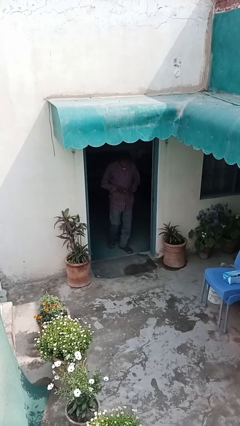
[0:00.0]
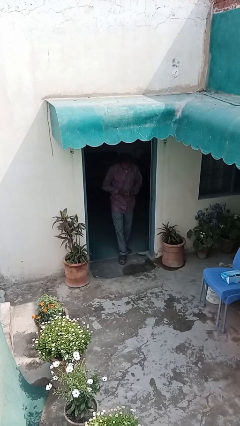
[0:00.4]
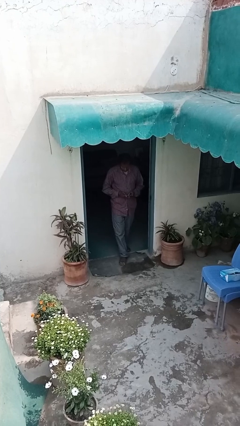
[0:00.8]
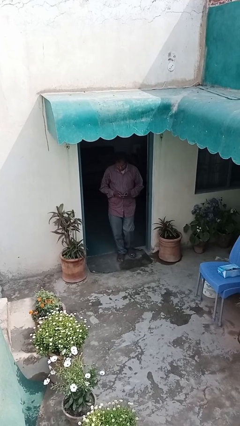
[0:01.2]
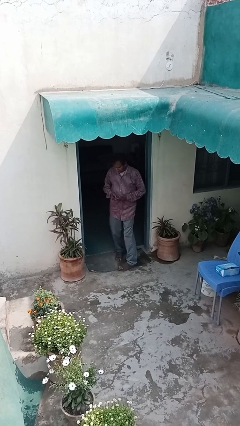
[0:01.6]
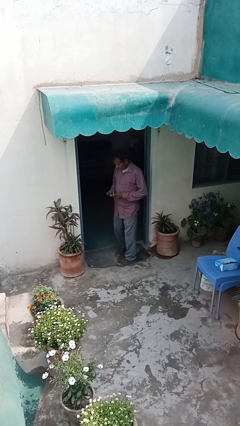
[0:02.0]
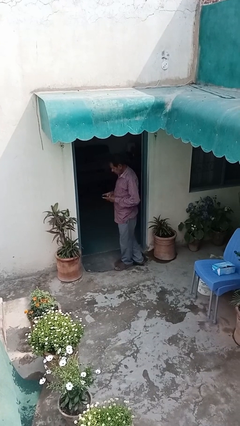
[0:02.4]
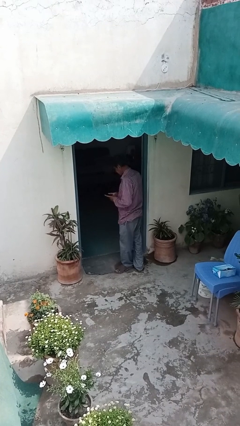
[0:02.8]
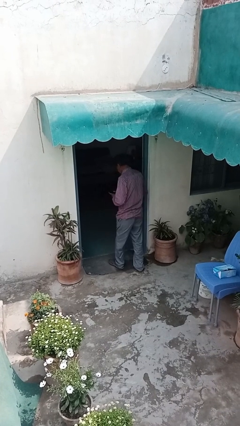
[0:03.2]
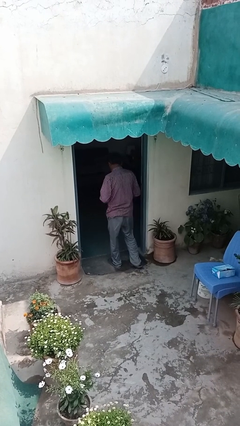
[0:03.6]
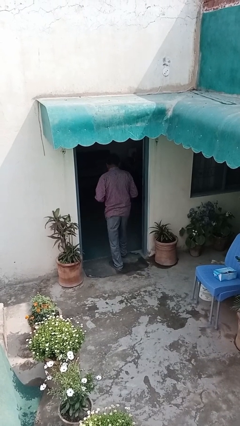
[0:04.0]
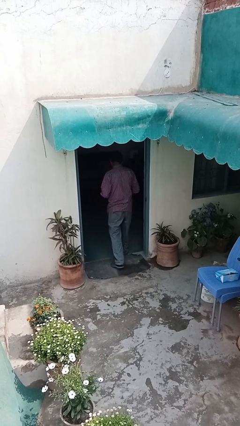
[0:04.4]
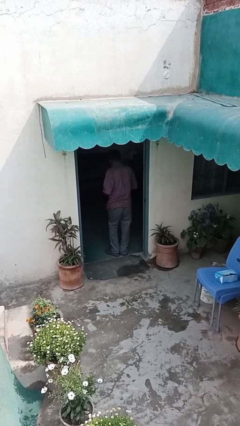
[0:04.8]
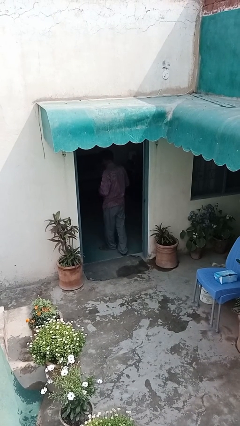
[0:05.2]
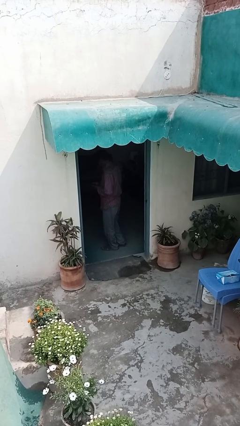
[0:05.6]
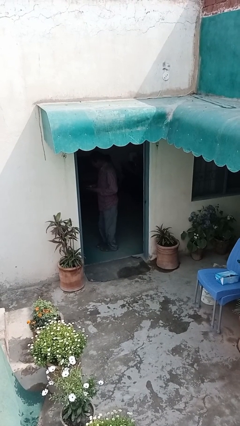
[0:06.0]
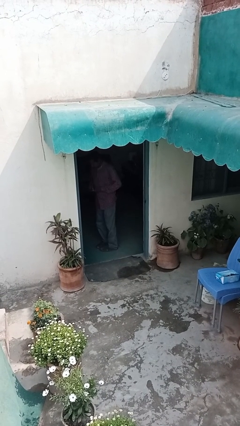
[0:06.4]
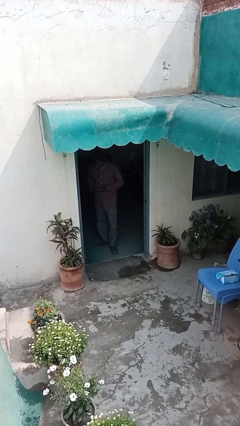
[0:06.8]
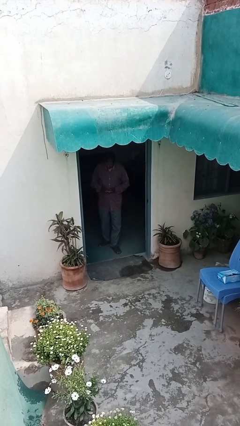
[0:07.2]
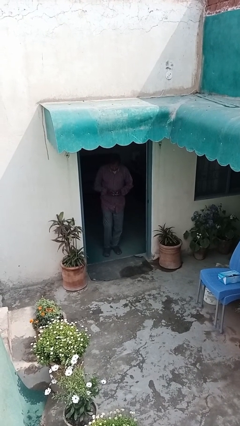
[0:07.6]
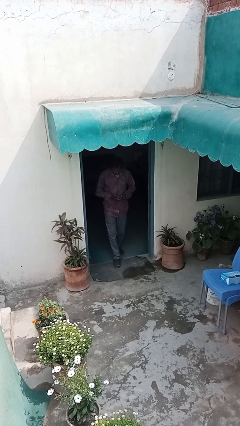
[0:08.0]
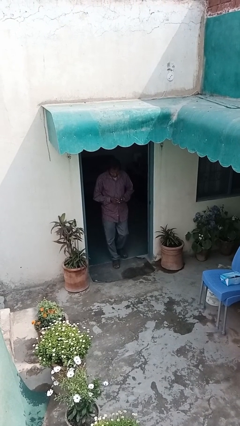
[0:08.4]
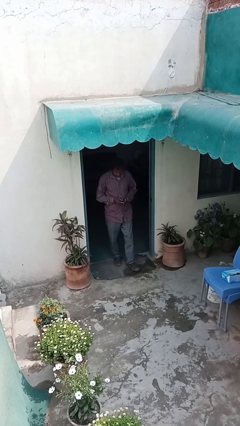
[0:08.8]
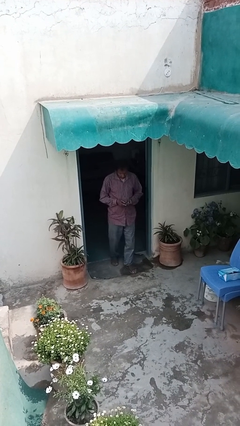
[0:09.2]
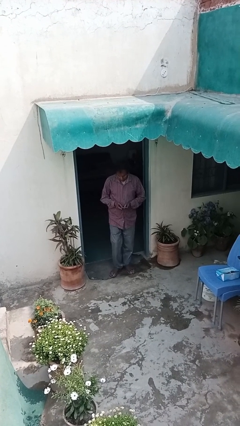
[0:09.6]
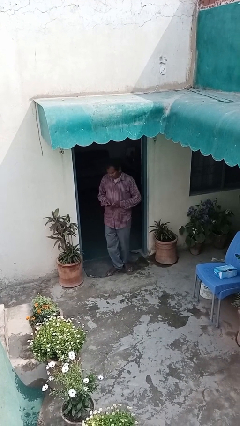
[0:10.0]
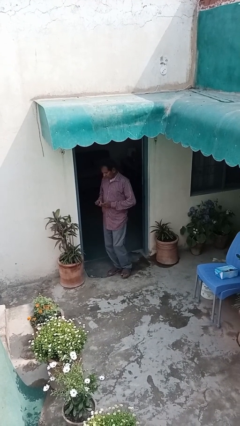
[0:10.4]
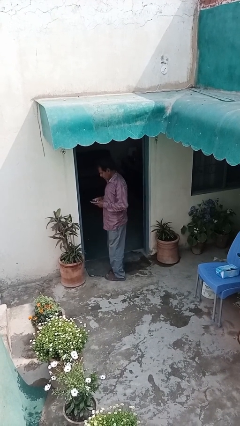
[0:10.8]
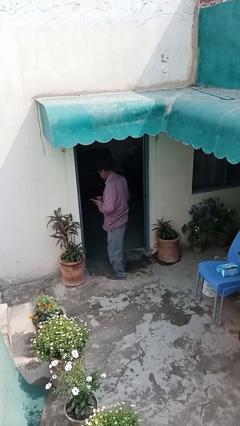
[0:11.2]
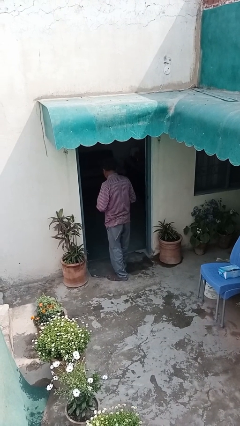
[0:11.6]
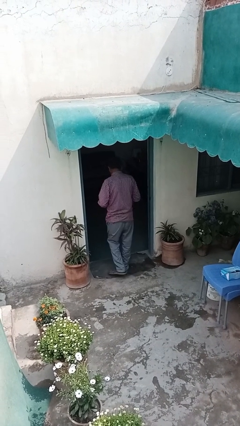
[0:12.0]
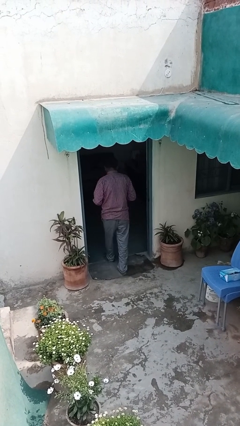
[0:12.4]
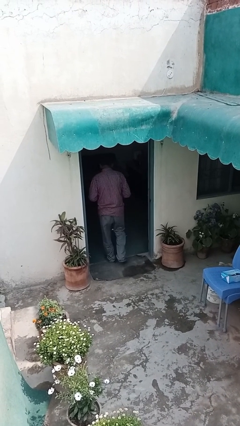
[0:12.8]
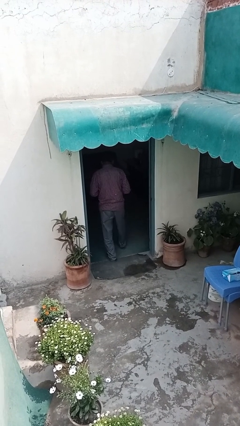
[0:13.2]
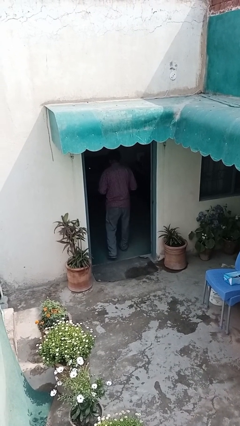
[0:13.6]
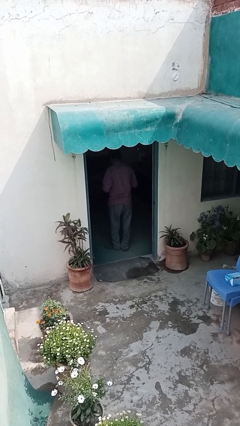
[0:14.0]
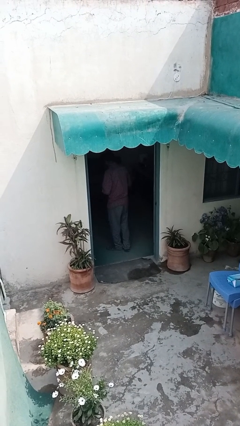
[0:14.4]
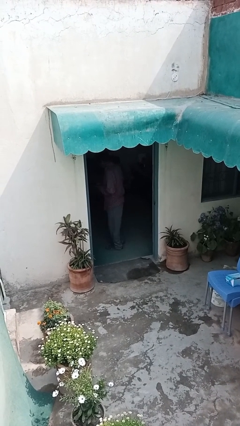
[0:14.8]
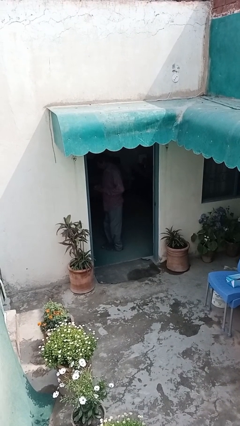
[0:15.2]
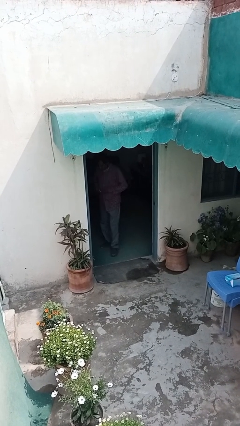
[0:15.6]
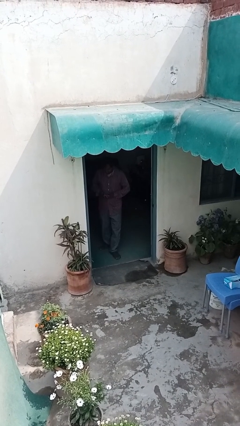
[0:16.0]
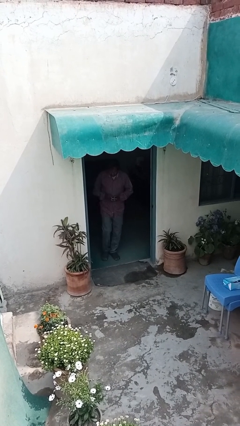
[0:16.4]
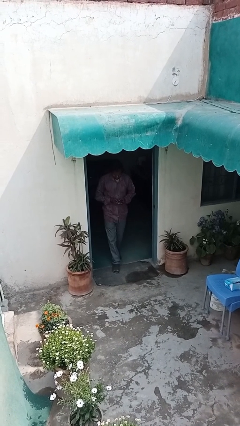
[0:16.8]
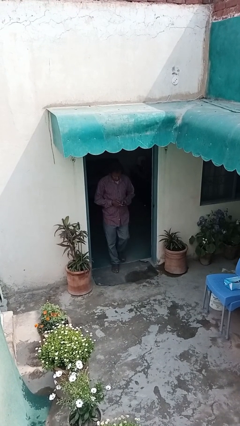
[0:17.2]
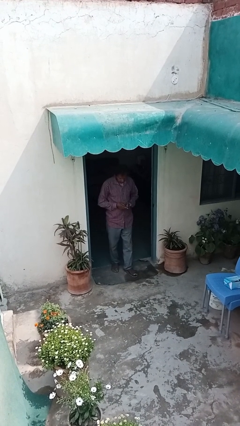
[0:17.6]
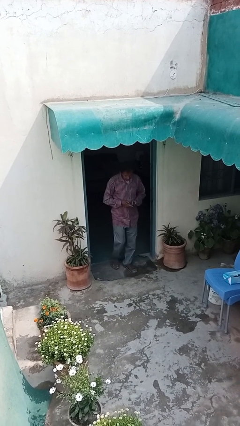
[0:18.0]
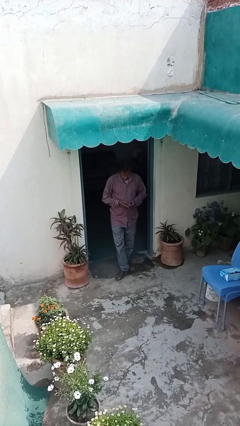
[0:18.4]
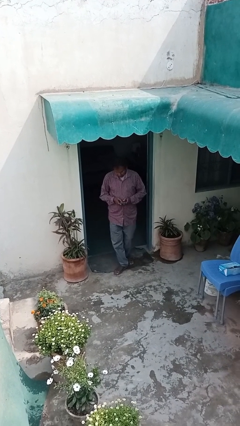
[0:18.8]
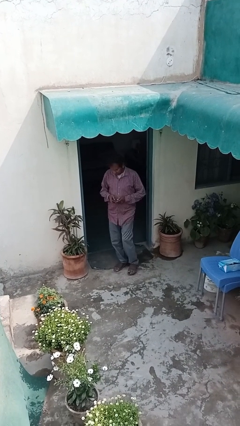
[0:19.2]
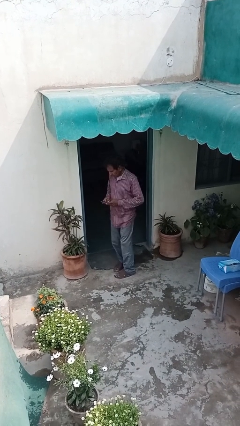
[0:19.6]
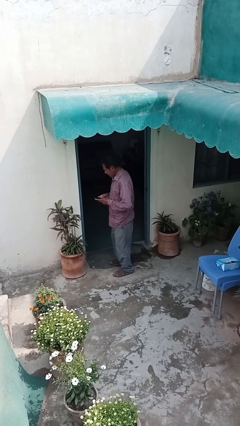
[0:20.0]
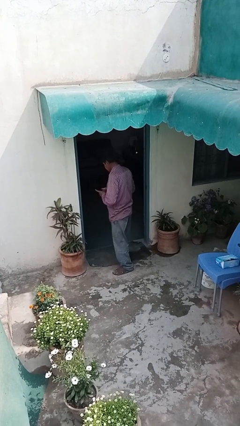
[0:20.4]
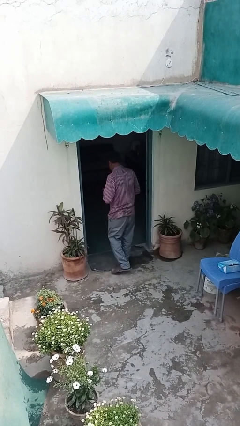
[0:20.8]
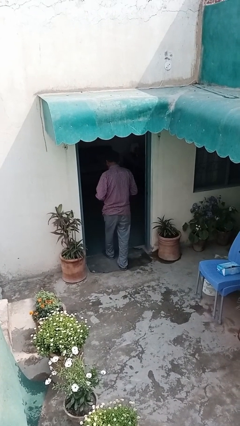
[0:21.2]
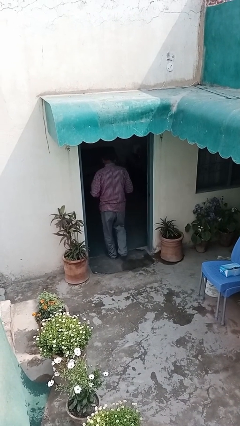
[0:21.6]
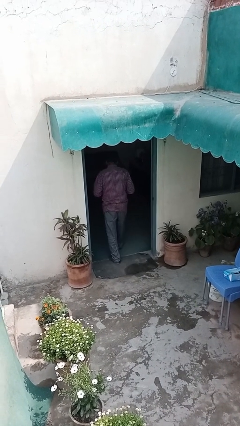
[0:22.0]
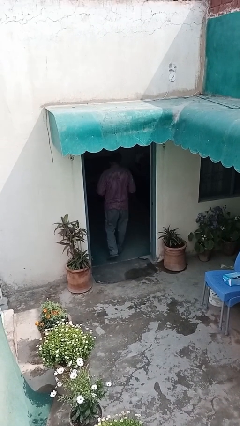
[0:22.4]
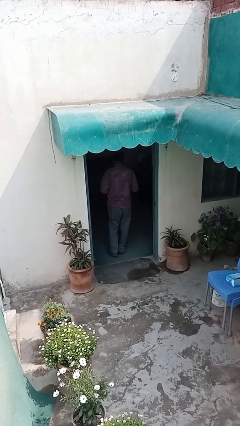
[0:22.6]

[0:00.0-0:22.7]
person texts on phone

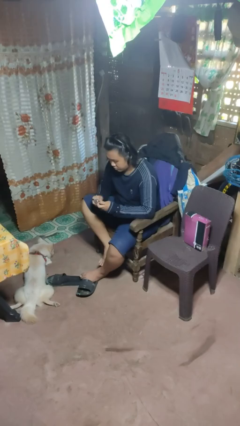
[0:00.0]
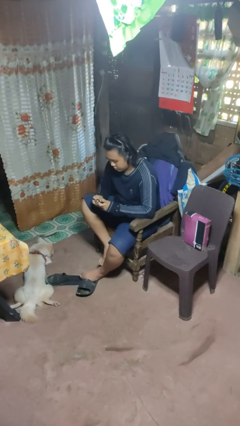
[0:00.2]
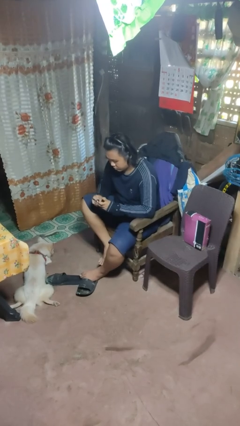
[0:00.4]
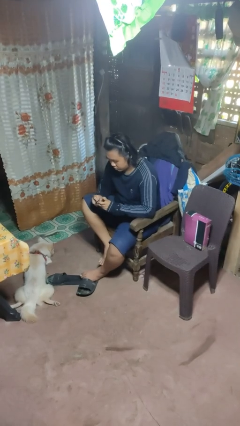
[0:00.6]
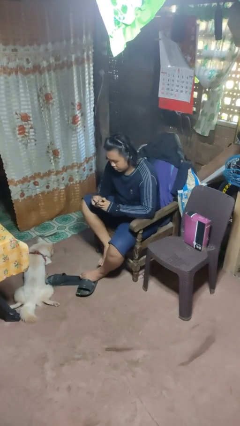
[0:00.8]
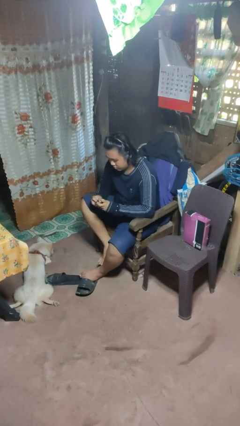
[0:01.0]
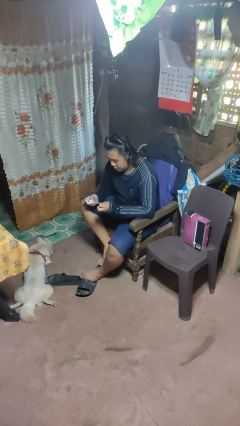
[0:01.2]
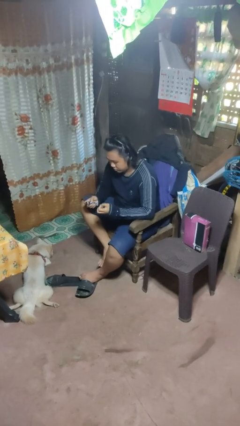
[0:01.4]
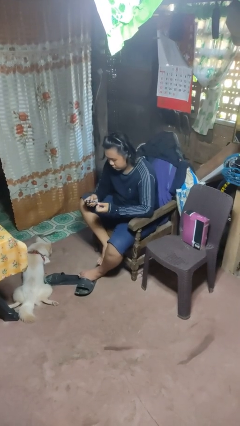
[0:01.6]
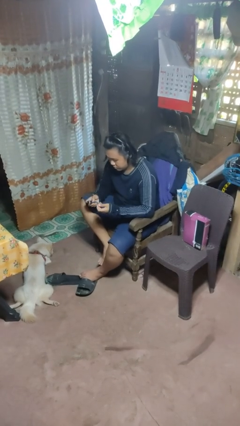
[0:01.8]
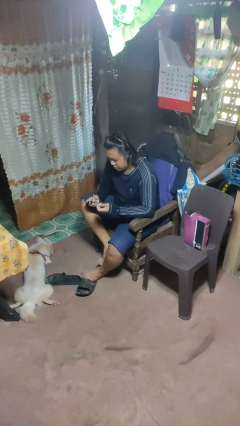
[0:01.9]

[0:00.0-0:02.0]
person files fingernails

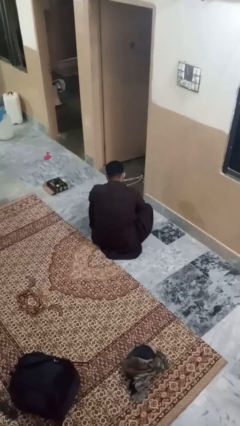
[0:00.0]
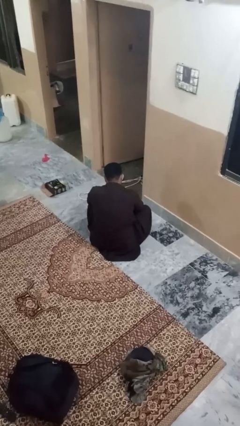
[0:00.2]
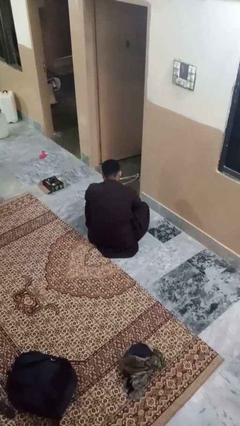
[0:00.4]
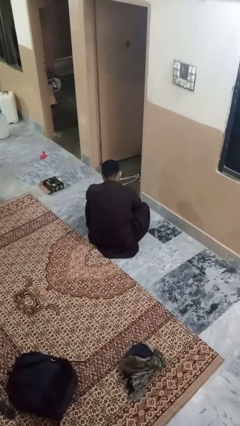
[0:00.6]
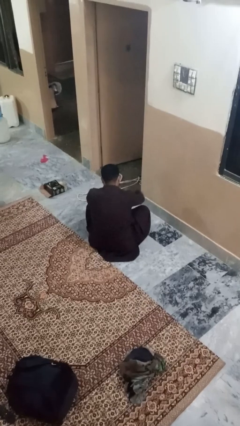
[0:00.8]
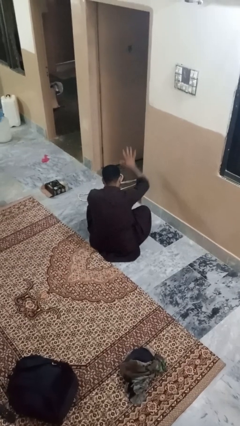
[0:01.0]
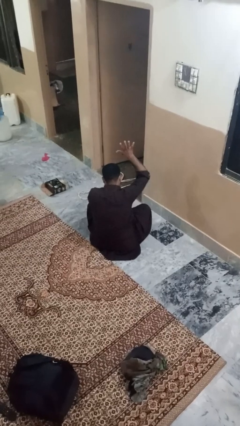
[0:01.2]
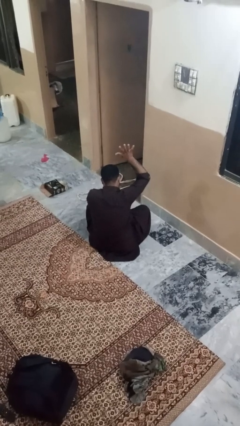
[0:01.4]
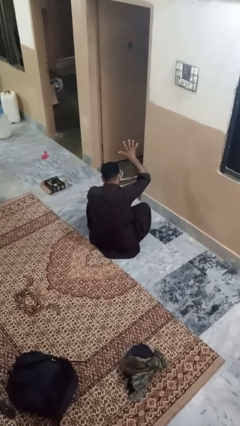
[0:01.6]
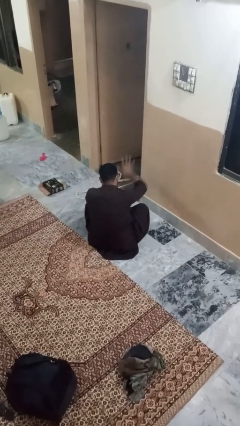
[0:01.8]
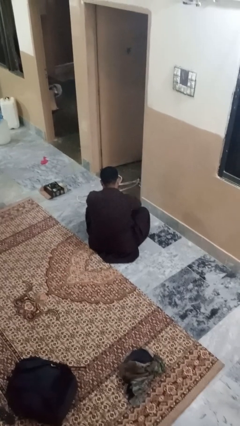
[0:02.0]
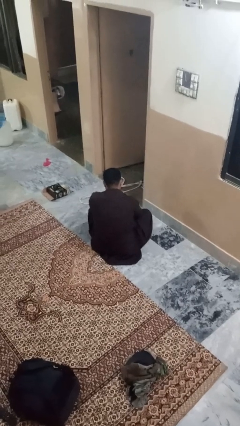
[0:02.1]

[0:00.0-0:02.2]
person gestures number five

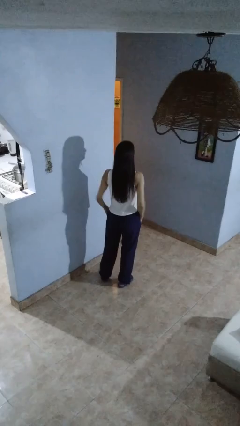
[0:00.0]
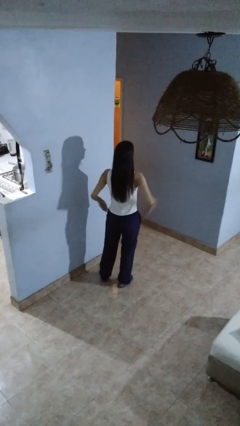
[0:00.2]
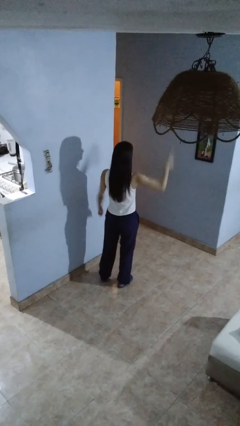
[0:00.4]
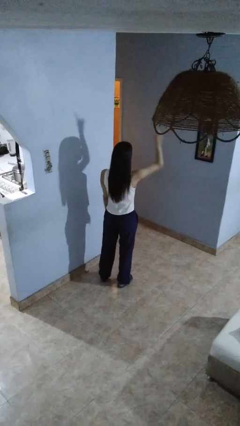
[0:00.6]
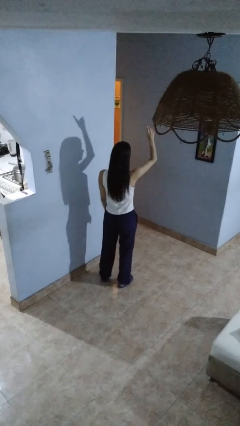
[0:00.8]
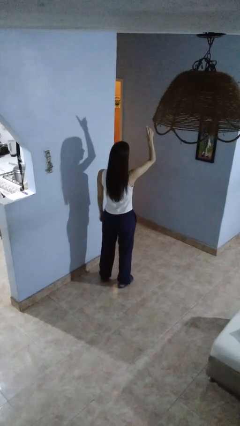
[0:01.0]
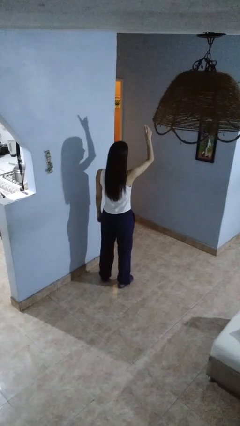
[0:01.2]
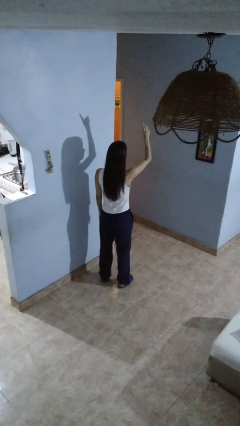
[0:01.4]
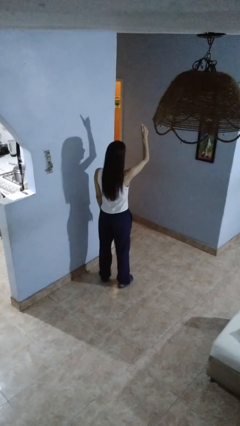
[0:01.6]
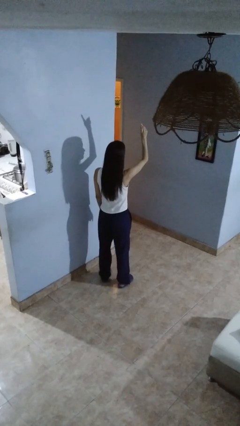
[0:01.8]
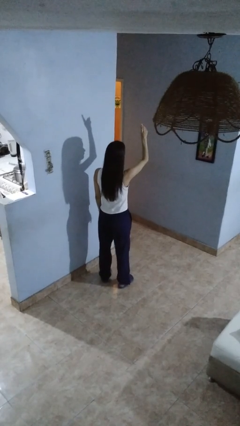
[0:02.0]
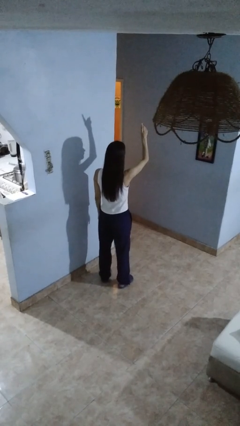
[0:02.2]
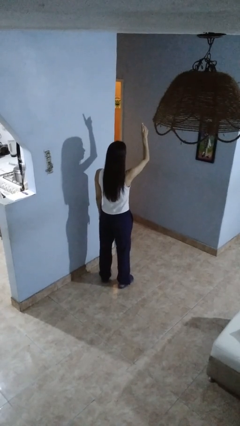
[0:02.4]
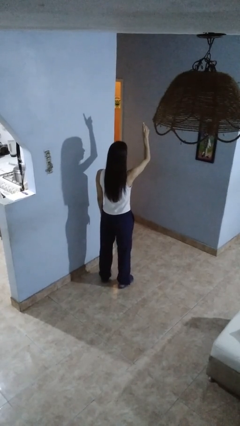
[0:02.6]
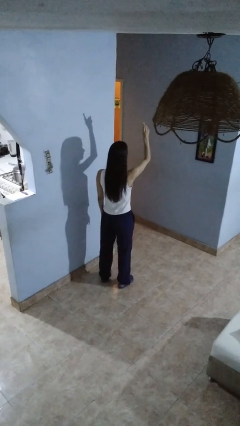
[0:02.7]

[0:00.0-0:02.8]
person gestures raise hand
